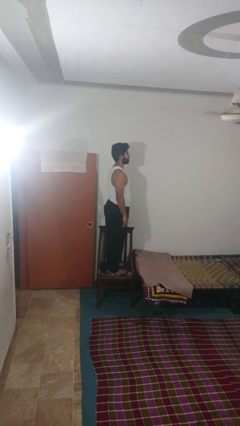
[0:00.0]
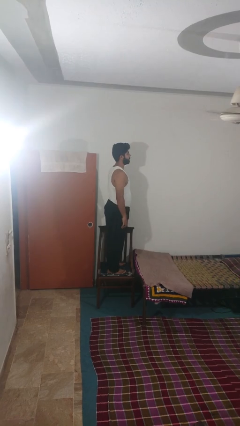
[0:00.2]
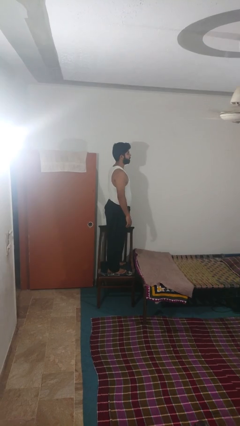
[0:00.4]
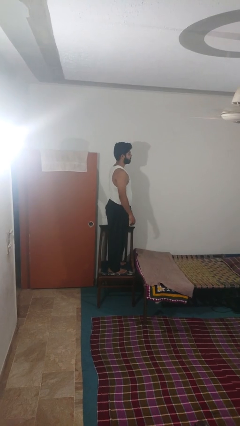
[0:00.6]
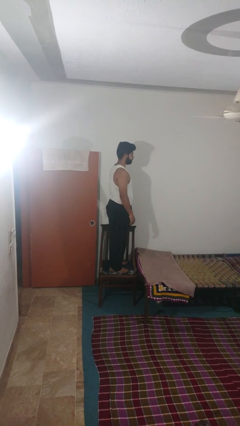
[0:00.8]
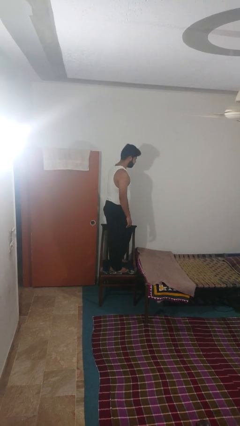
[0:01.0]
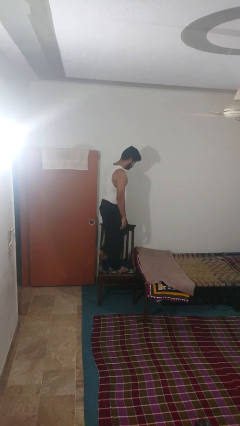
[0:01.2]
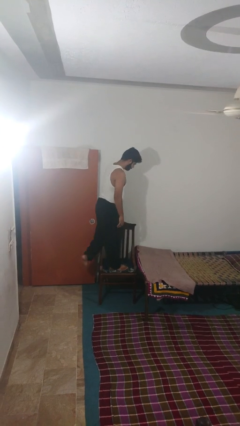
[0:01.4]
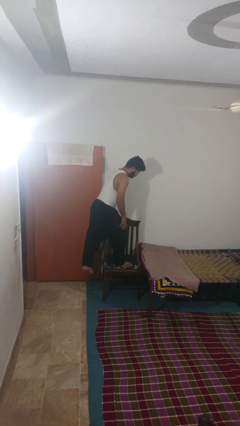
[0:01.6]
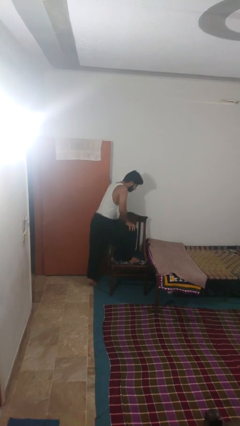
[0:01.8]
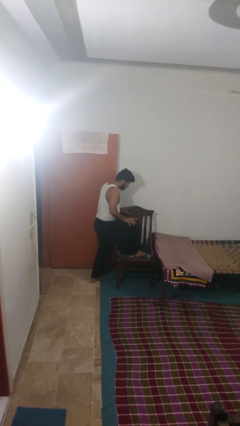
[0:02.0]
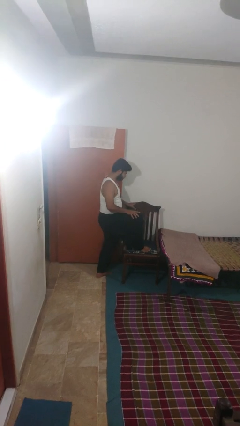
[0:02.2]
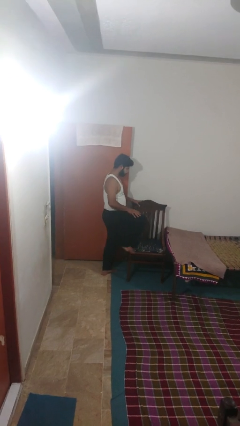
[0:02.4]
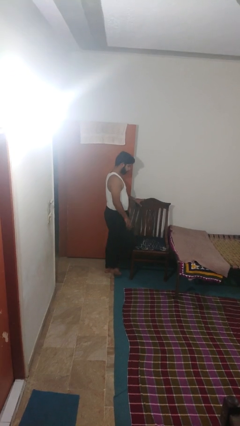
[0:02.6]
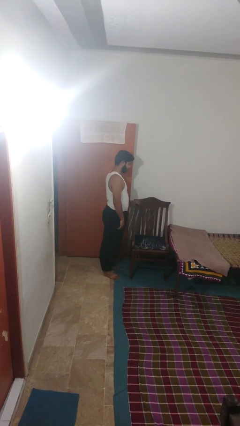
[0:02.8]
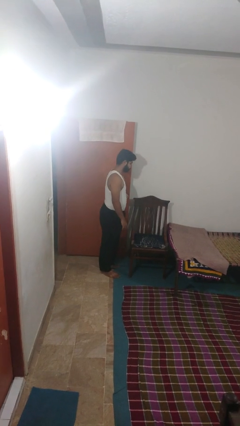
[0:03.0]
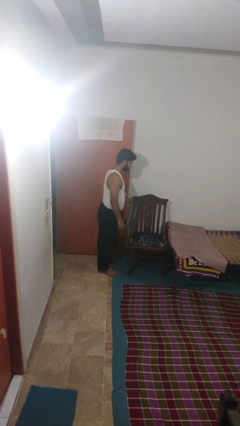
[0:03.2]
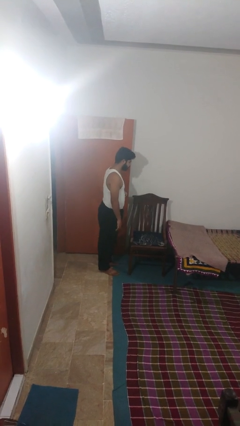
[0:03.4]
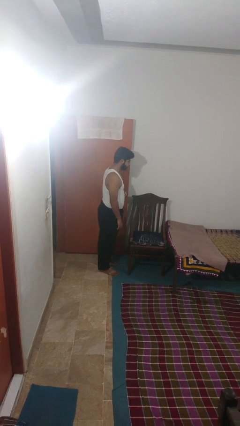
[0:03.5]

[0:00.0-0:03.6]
person climbs off chair

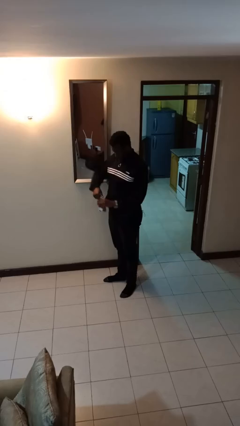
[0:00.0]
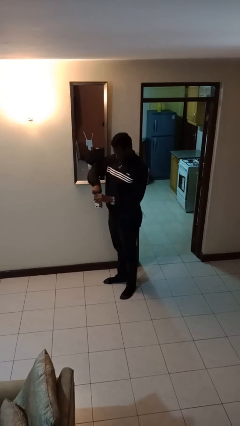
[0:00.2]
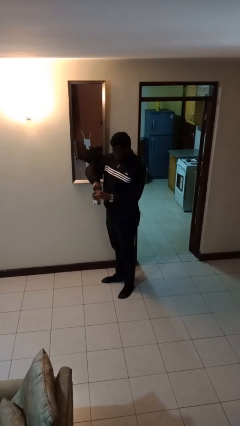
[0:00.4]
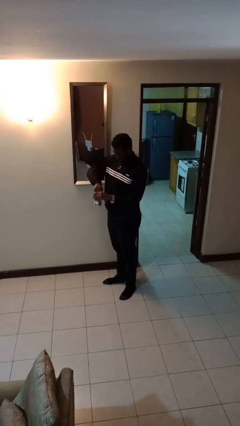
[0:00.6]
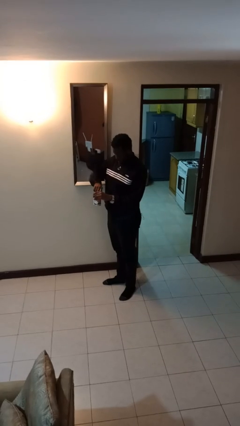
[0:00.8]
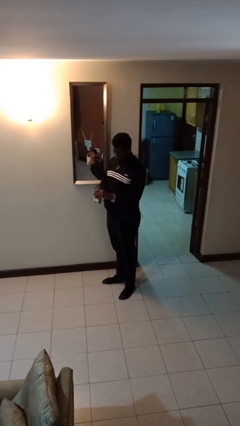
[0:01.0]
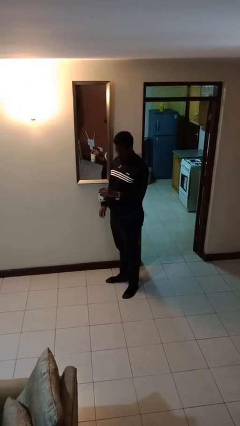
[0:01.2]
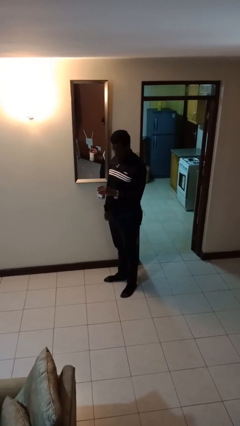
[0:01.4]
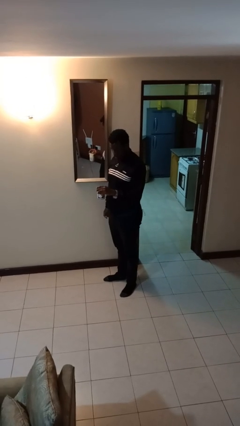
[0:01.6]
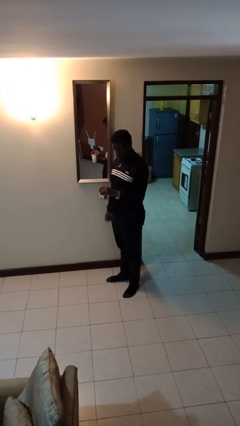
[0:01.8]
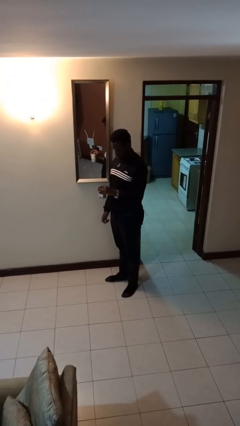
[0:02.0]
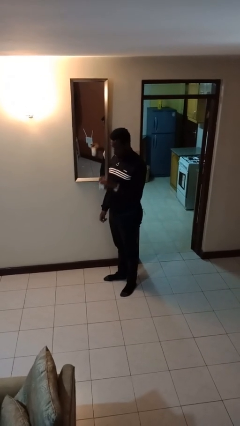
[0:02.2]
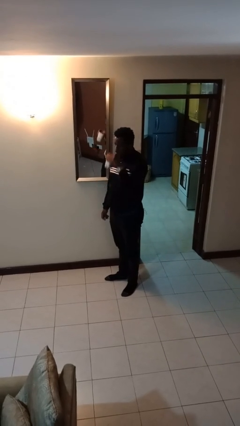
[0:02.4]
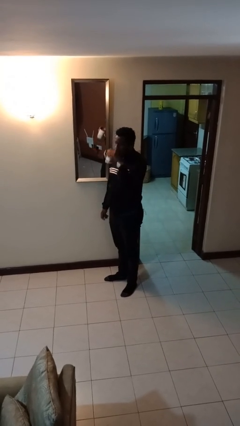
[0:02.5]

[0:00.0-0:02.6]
person opens beverage can

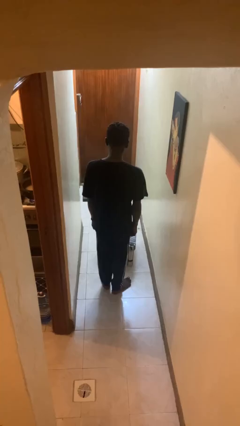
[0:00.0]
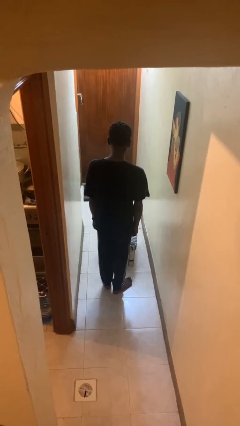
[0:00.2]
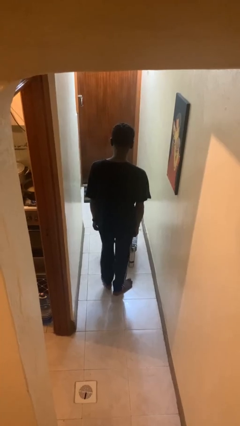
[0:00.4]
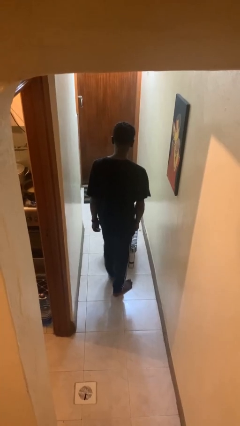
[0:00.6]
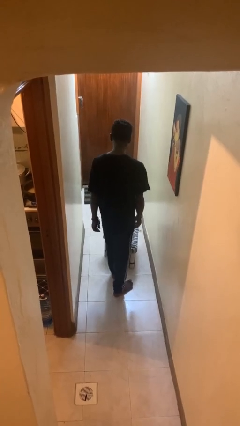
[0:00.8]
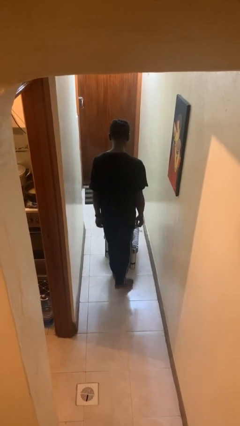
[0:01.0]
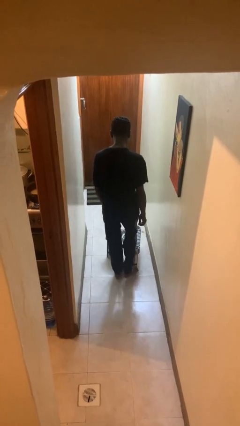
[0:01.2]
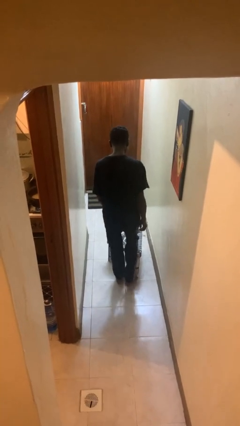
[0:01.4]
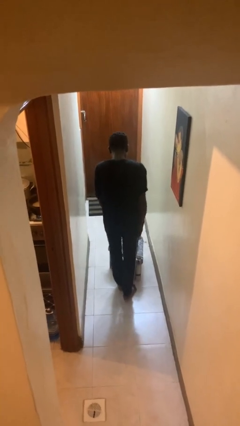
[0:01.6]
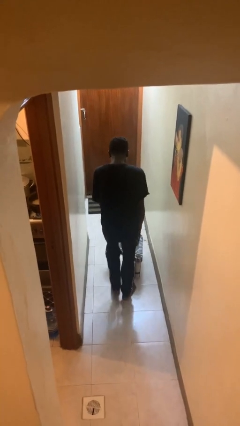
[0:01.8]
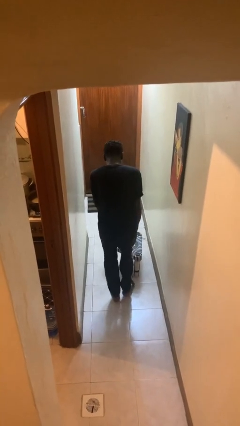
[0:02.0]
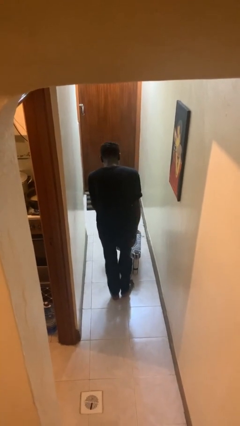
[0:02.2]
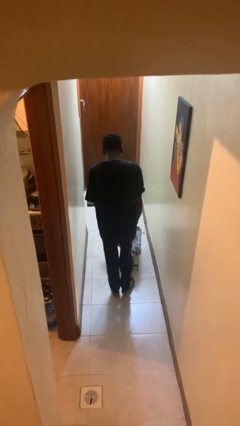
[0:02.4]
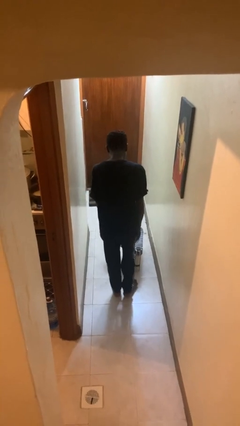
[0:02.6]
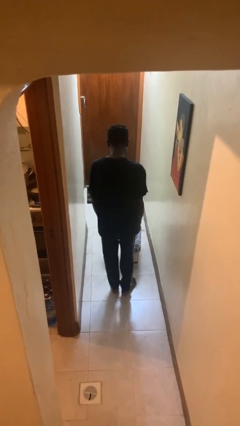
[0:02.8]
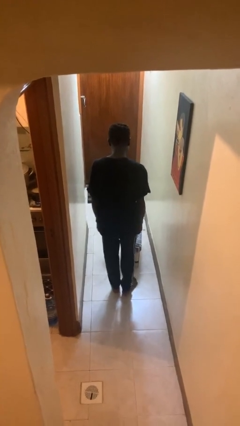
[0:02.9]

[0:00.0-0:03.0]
person stubs toe

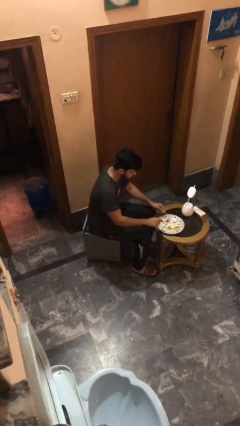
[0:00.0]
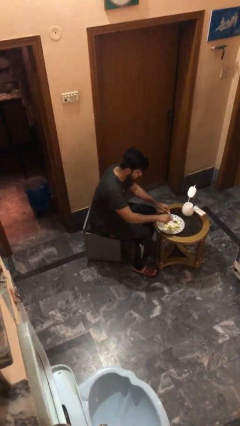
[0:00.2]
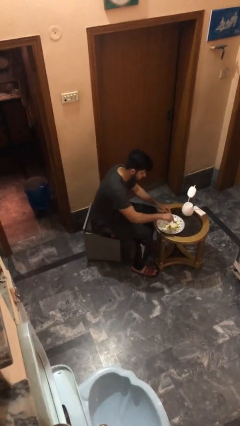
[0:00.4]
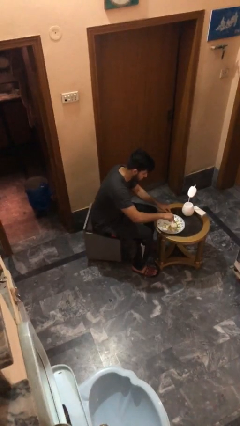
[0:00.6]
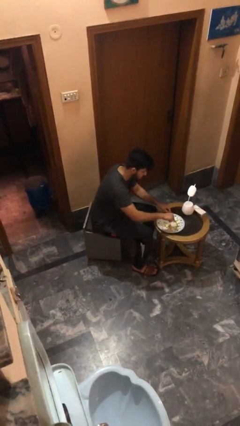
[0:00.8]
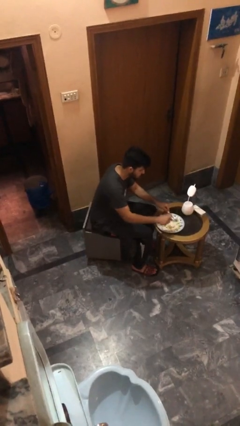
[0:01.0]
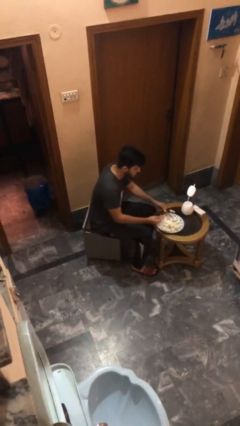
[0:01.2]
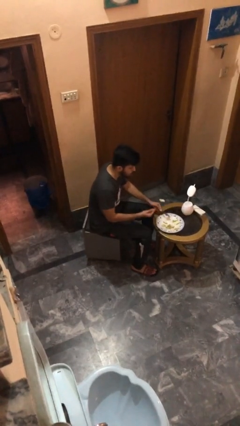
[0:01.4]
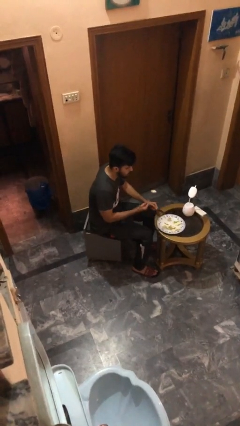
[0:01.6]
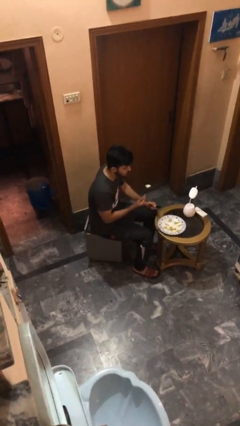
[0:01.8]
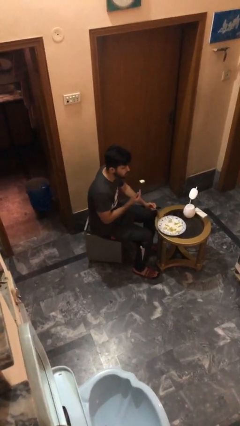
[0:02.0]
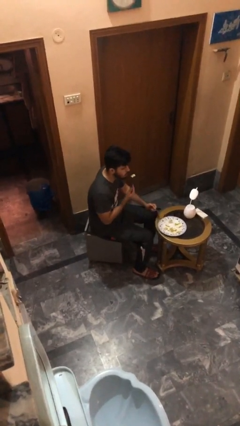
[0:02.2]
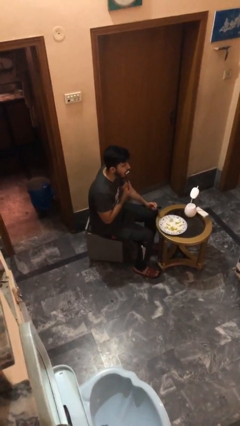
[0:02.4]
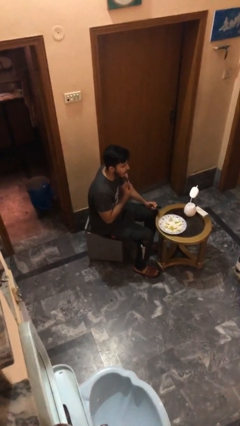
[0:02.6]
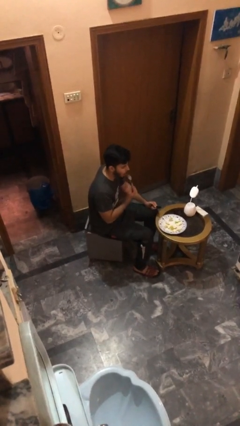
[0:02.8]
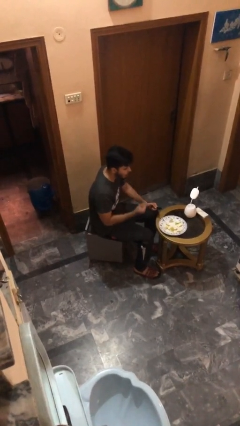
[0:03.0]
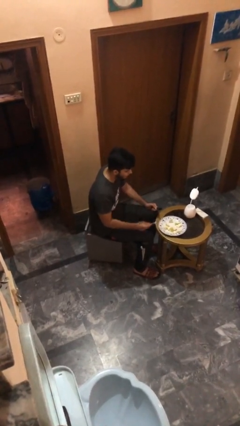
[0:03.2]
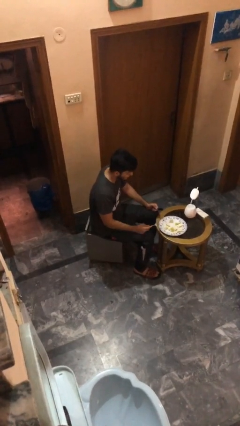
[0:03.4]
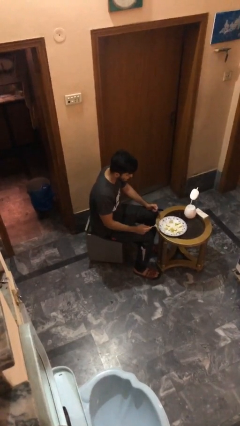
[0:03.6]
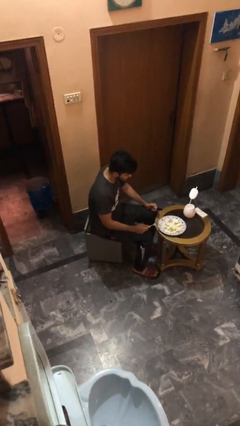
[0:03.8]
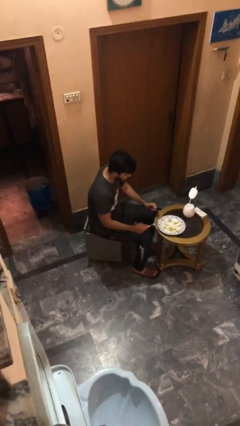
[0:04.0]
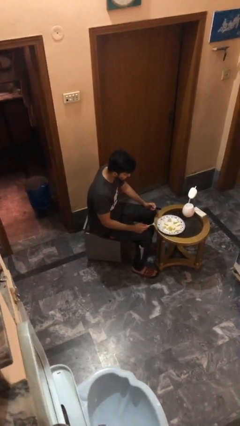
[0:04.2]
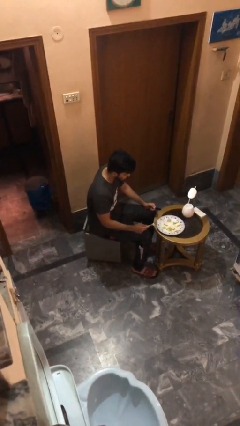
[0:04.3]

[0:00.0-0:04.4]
person eats with utensil

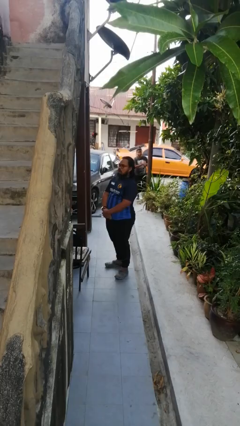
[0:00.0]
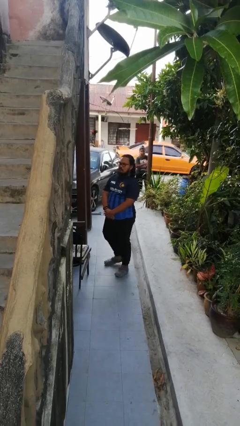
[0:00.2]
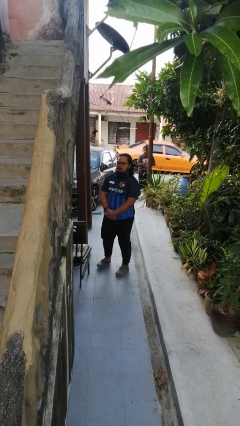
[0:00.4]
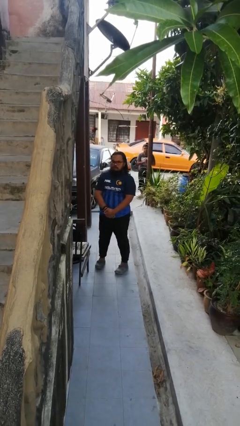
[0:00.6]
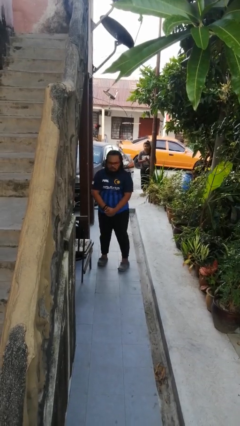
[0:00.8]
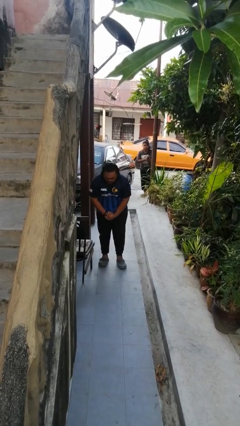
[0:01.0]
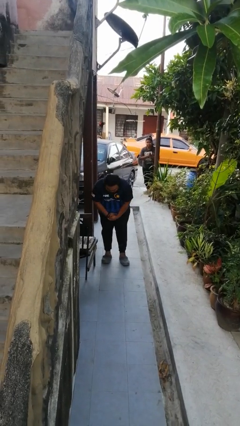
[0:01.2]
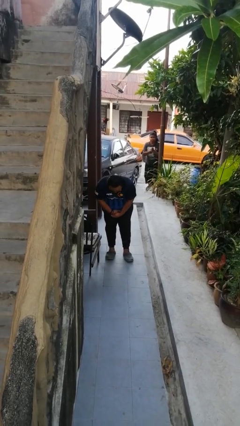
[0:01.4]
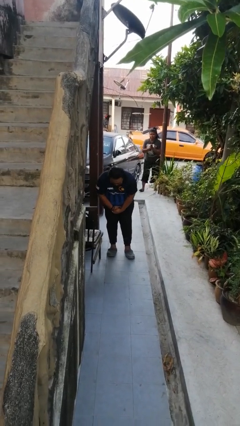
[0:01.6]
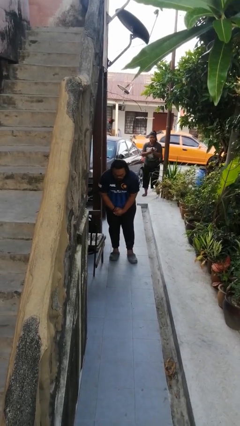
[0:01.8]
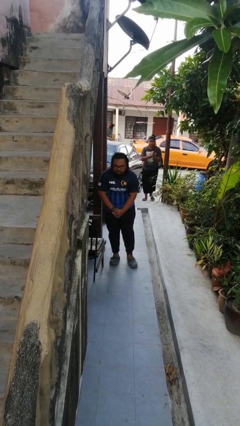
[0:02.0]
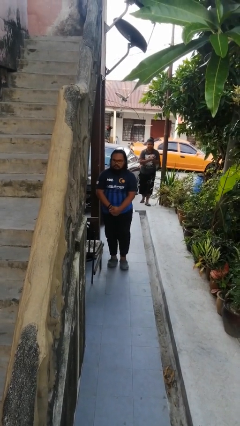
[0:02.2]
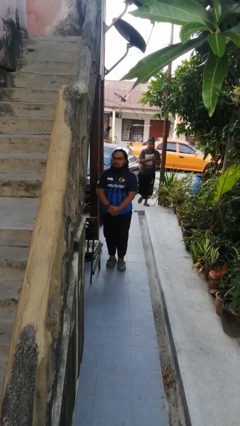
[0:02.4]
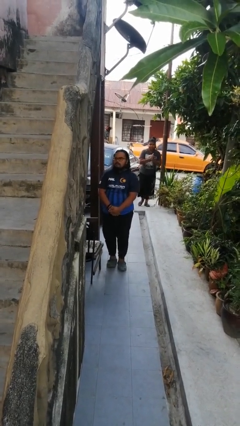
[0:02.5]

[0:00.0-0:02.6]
person bows

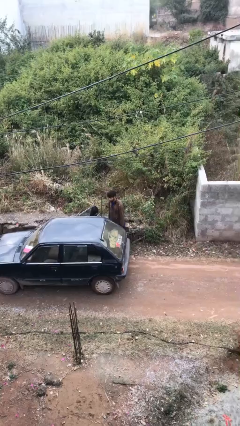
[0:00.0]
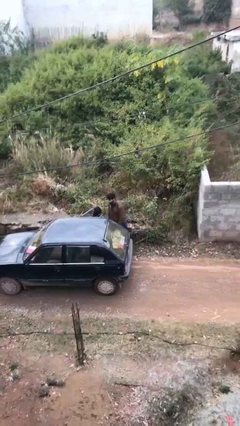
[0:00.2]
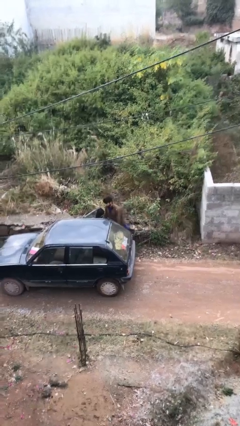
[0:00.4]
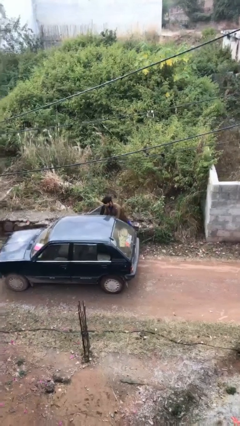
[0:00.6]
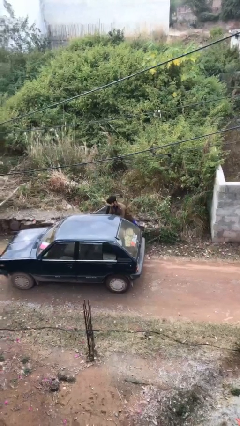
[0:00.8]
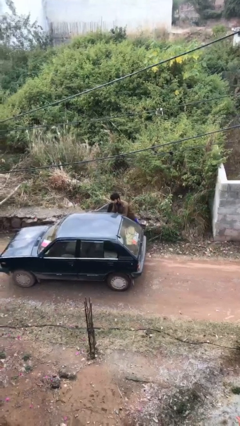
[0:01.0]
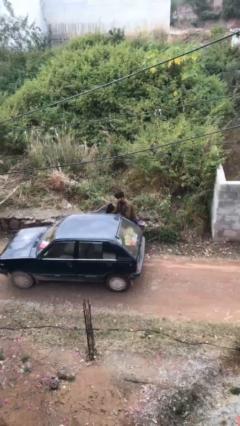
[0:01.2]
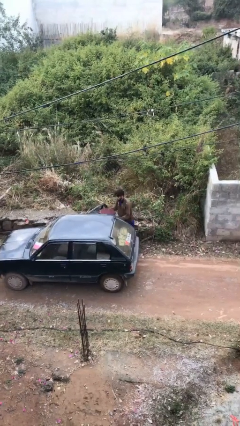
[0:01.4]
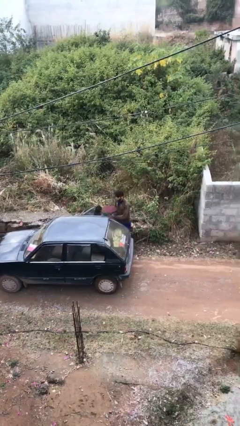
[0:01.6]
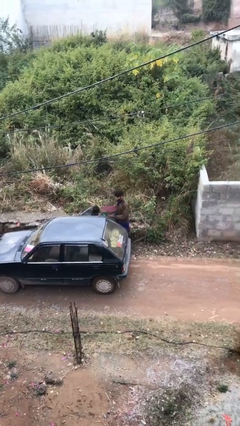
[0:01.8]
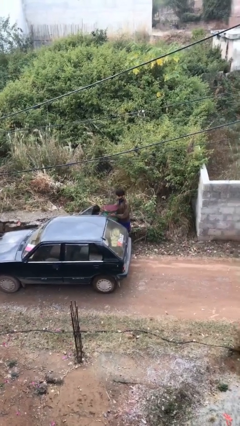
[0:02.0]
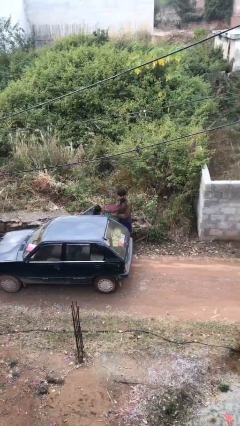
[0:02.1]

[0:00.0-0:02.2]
person unloads car
